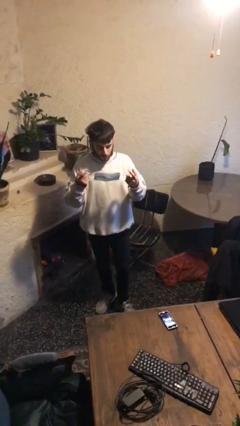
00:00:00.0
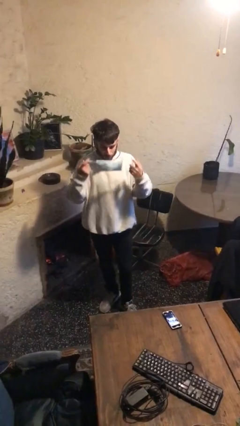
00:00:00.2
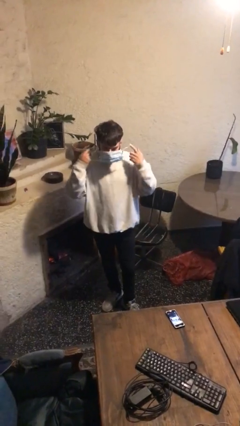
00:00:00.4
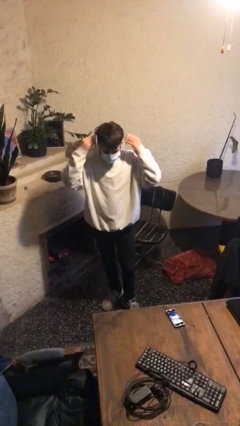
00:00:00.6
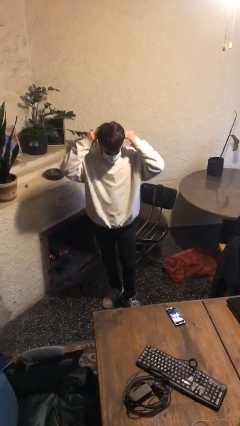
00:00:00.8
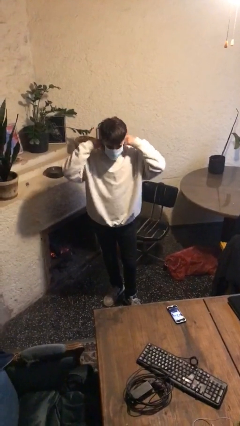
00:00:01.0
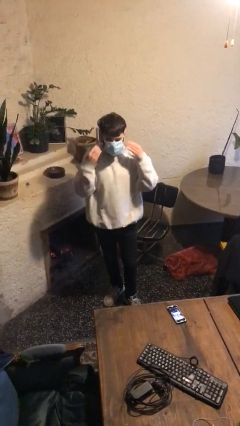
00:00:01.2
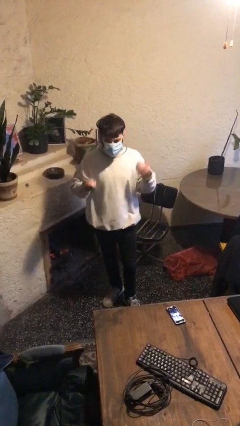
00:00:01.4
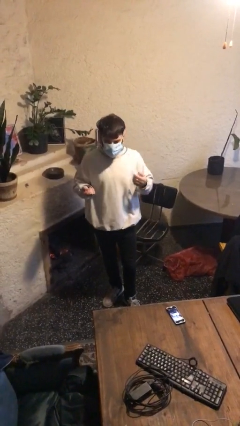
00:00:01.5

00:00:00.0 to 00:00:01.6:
person puts on facemask

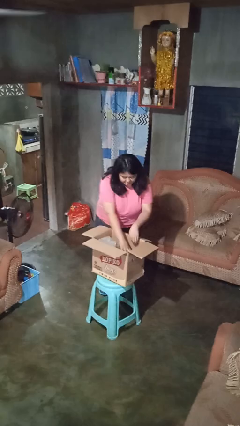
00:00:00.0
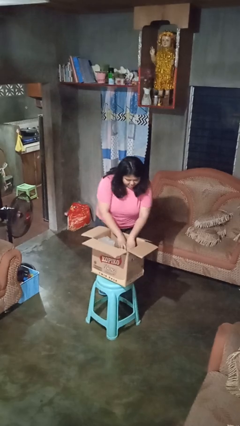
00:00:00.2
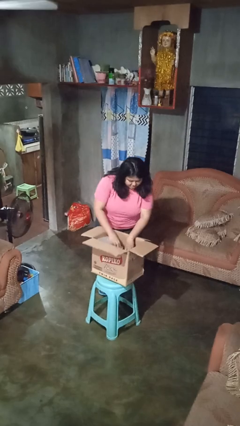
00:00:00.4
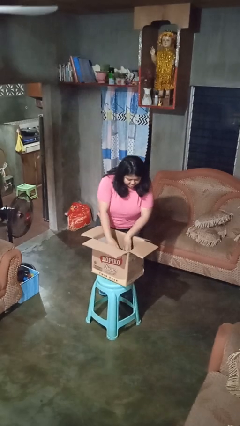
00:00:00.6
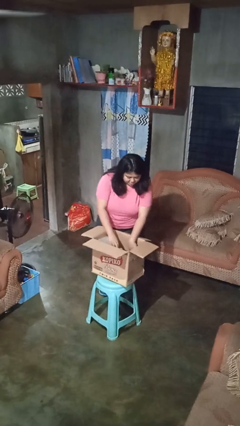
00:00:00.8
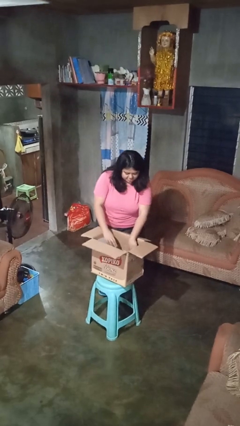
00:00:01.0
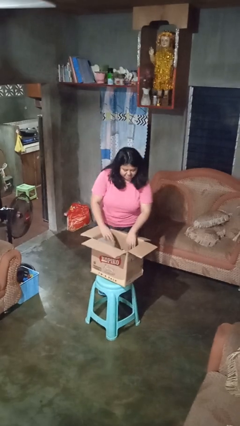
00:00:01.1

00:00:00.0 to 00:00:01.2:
person searches in box

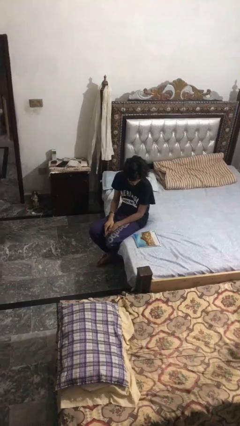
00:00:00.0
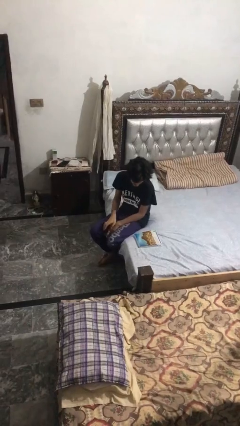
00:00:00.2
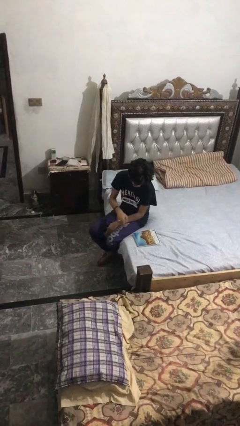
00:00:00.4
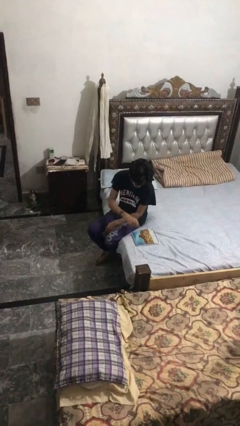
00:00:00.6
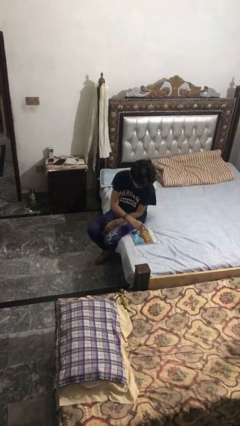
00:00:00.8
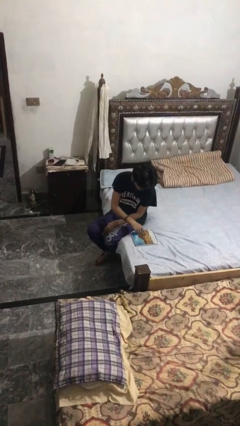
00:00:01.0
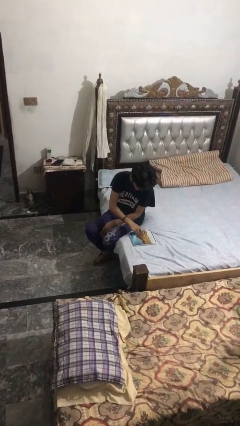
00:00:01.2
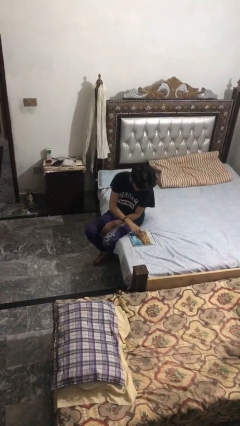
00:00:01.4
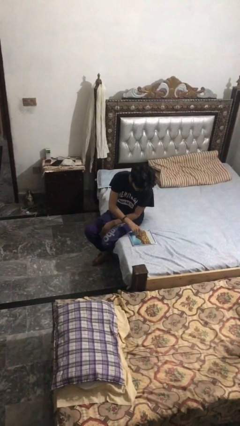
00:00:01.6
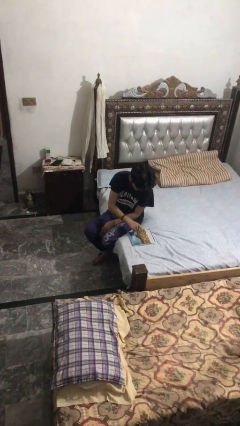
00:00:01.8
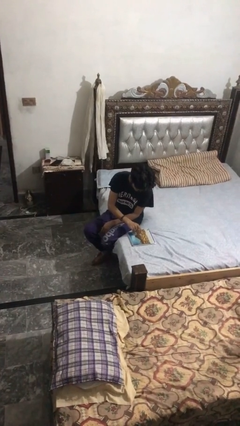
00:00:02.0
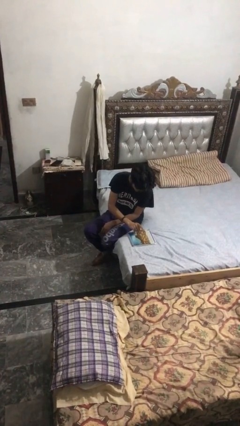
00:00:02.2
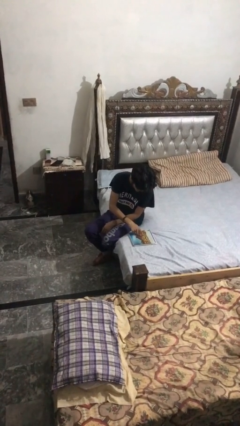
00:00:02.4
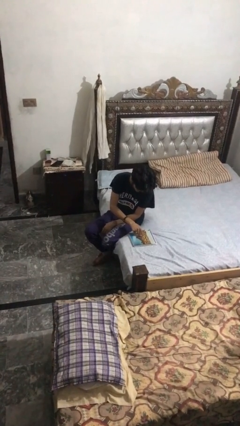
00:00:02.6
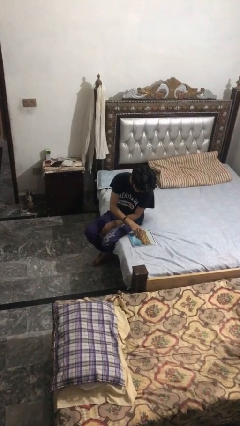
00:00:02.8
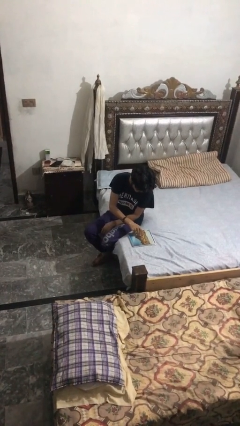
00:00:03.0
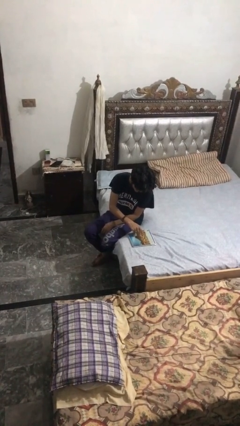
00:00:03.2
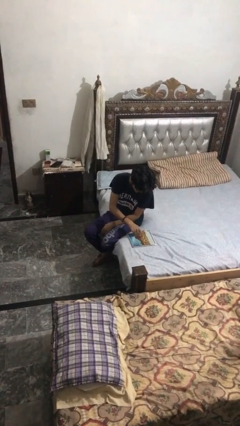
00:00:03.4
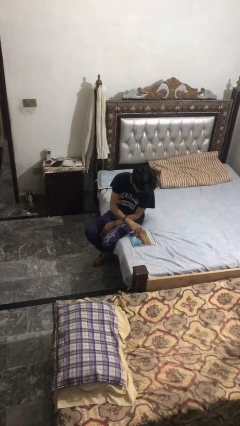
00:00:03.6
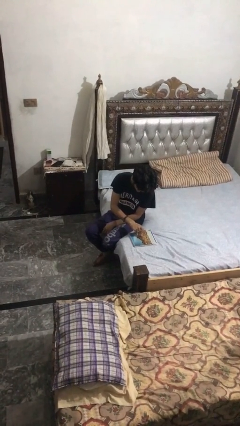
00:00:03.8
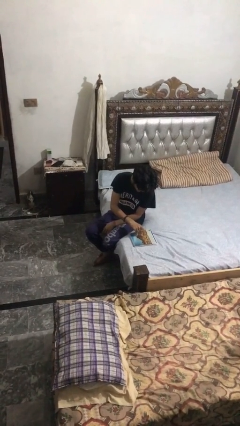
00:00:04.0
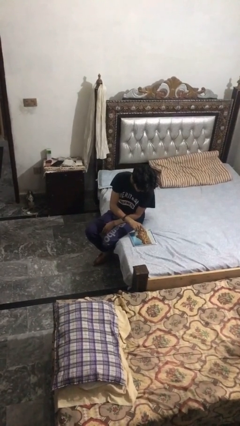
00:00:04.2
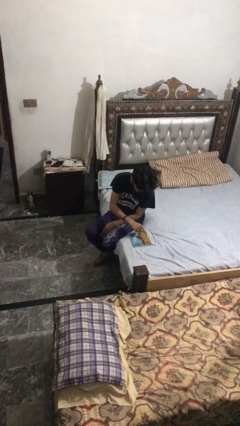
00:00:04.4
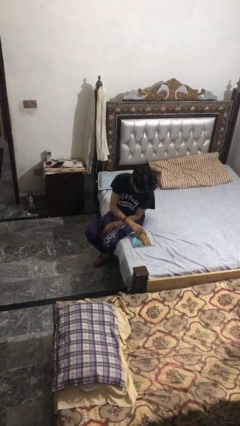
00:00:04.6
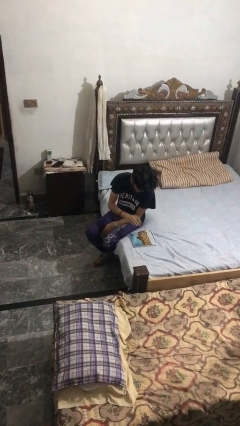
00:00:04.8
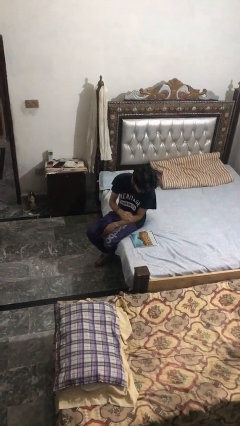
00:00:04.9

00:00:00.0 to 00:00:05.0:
person taps object with finger

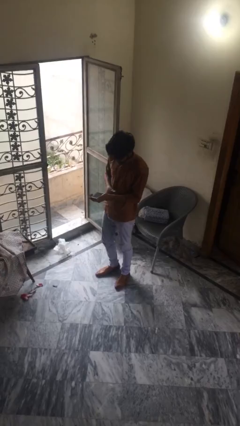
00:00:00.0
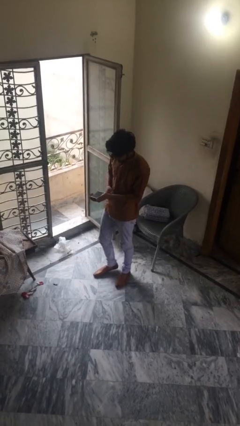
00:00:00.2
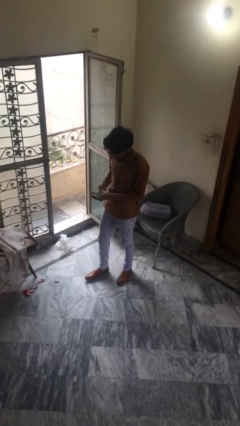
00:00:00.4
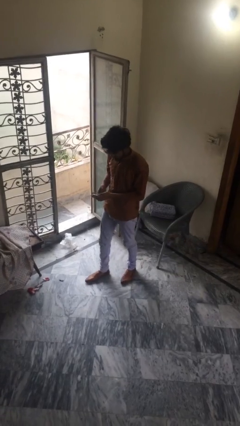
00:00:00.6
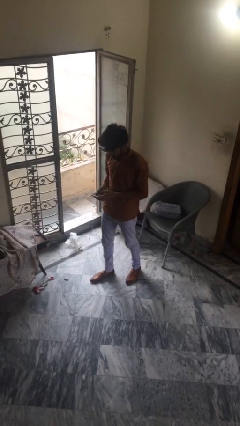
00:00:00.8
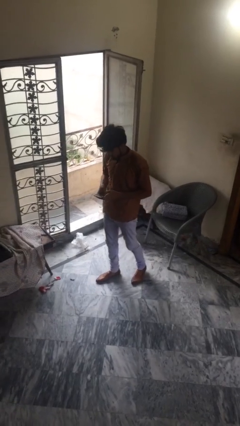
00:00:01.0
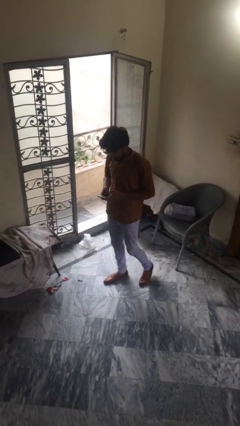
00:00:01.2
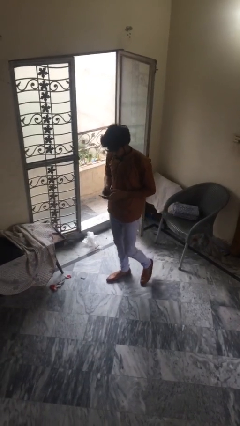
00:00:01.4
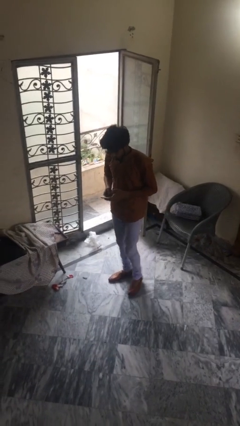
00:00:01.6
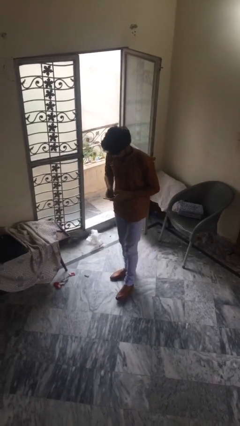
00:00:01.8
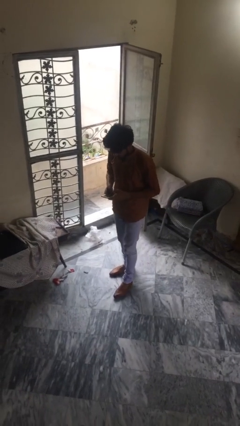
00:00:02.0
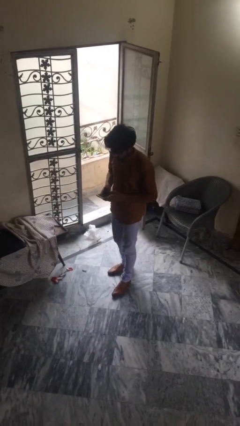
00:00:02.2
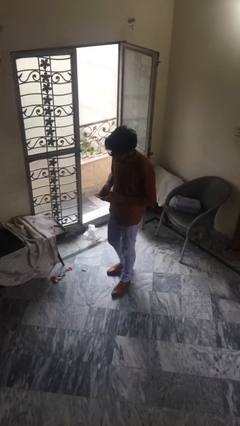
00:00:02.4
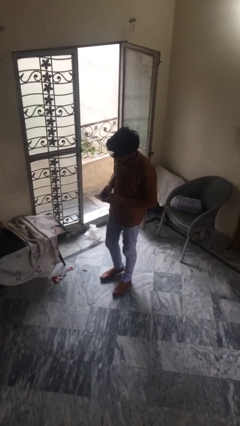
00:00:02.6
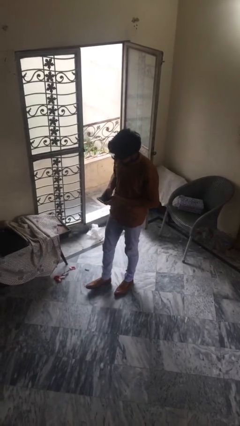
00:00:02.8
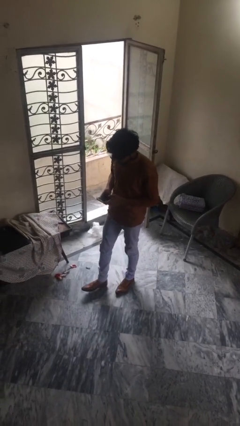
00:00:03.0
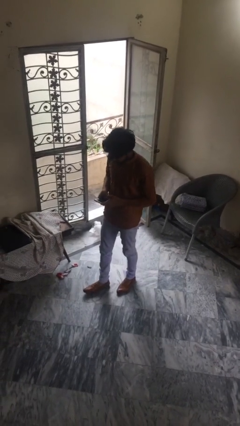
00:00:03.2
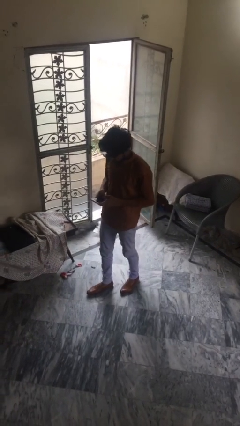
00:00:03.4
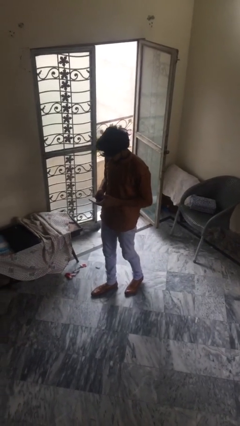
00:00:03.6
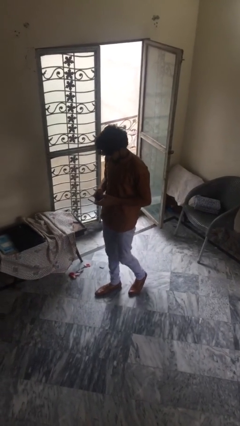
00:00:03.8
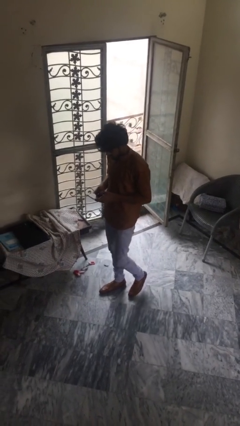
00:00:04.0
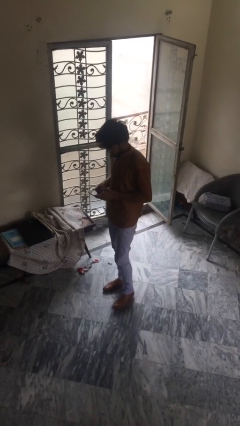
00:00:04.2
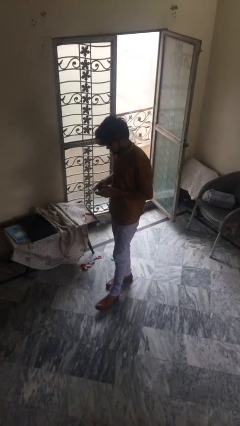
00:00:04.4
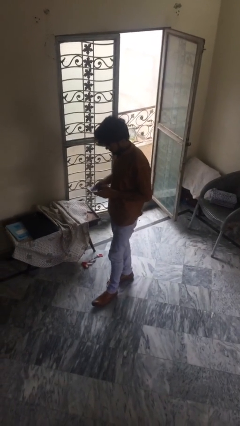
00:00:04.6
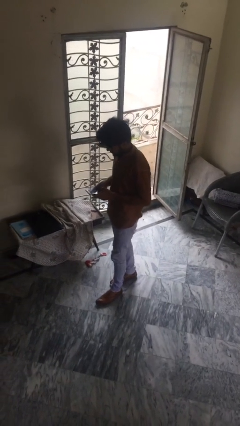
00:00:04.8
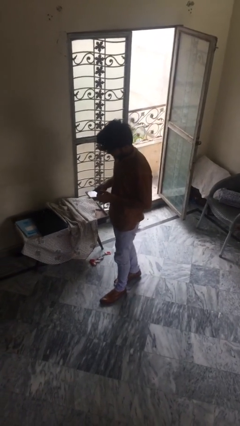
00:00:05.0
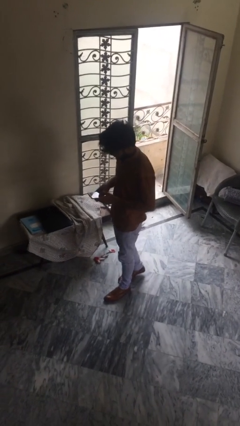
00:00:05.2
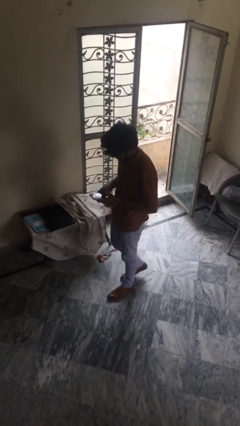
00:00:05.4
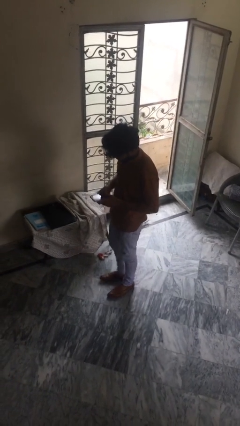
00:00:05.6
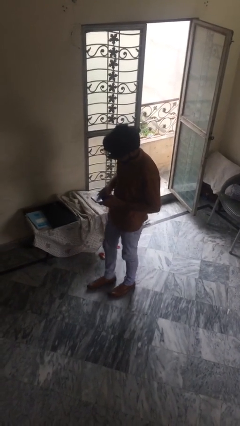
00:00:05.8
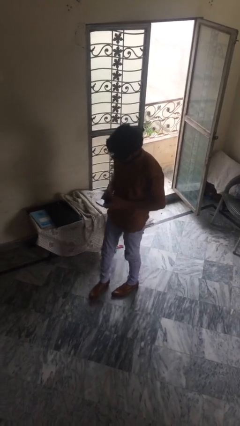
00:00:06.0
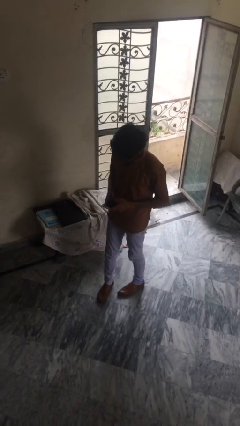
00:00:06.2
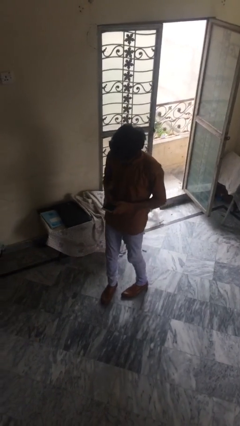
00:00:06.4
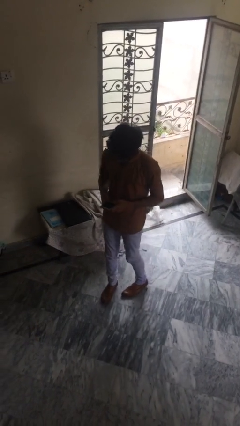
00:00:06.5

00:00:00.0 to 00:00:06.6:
person texts on phone

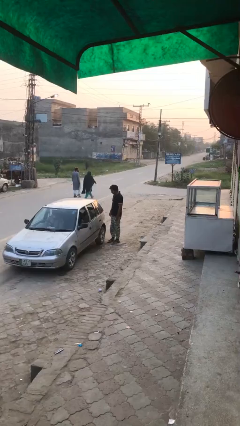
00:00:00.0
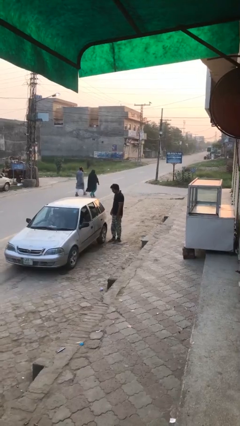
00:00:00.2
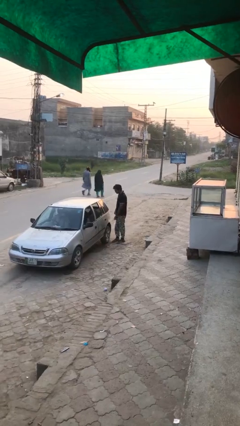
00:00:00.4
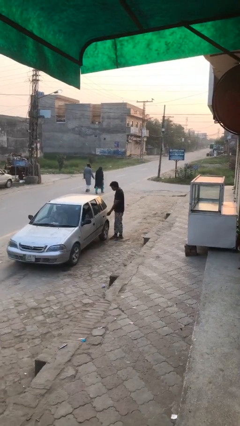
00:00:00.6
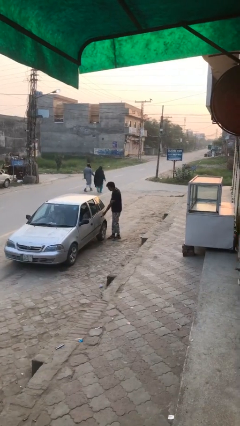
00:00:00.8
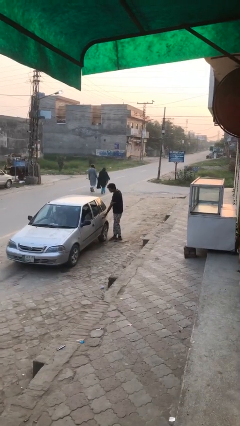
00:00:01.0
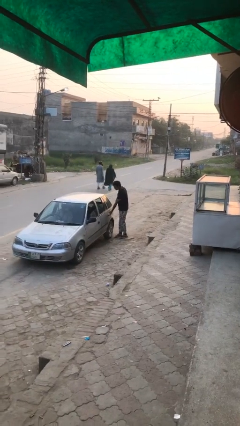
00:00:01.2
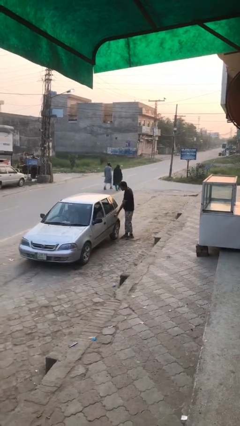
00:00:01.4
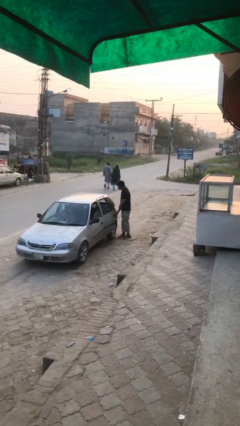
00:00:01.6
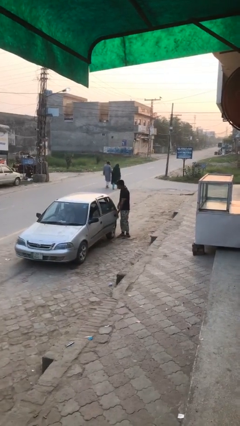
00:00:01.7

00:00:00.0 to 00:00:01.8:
person opens car door

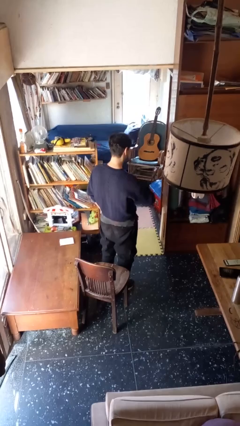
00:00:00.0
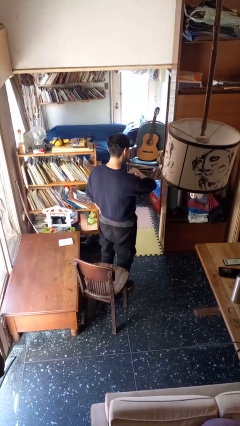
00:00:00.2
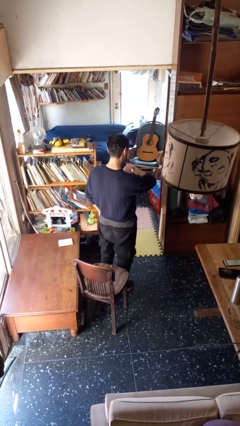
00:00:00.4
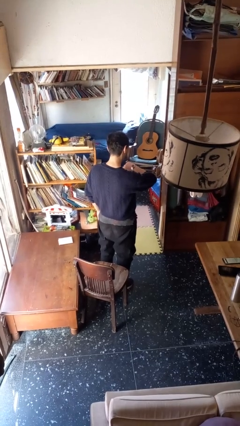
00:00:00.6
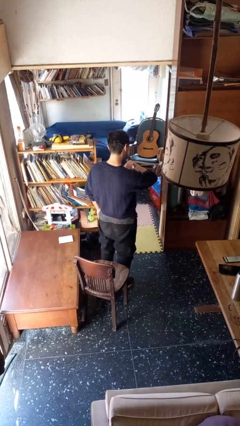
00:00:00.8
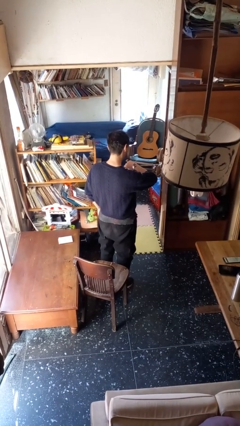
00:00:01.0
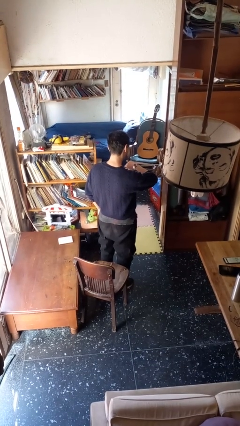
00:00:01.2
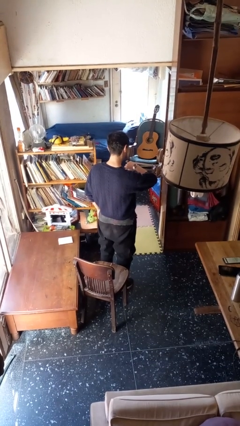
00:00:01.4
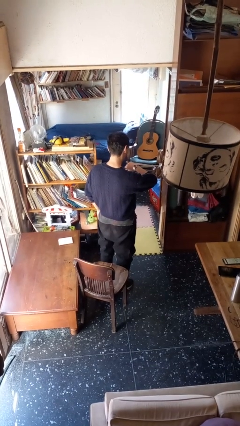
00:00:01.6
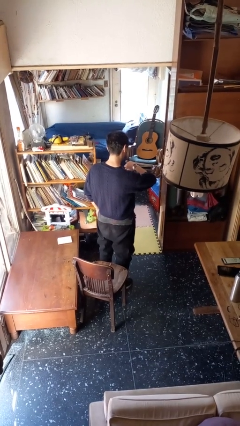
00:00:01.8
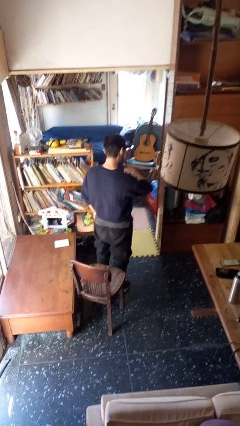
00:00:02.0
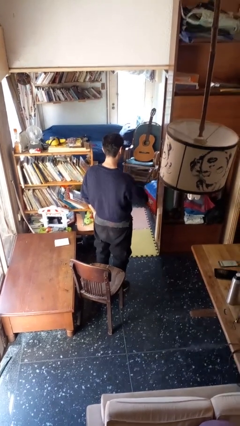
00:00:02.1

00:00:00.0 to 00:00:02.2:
person looks at wristwatch
